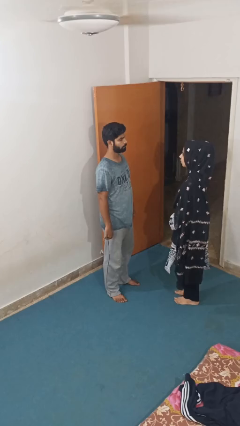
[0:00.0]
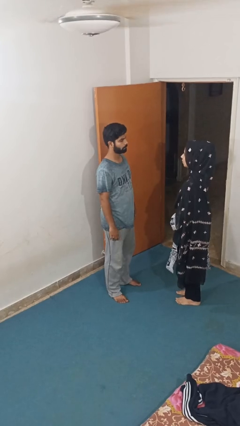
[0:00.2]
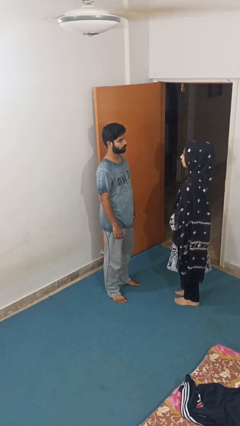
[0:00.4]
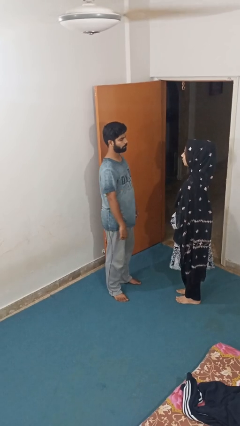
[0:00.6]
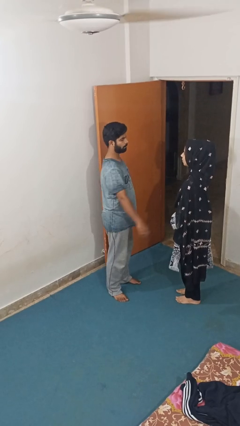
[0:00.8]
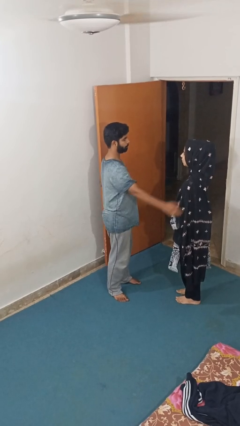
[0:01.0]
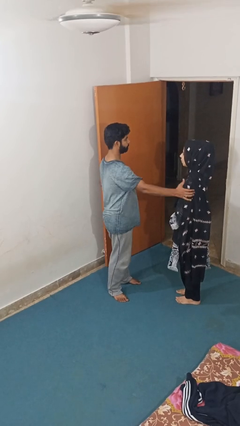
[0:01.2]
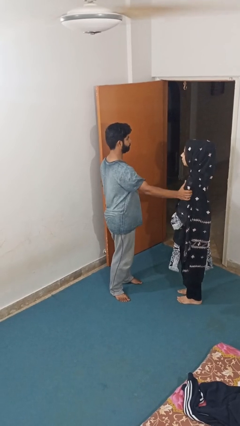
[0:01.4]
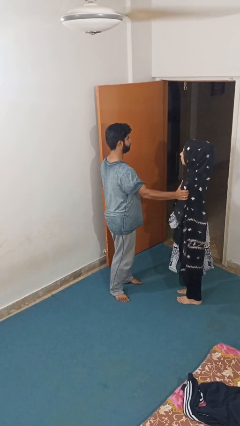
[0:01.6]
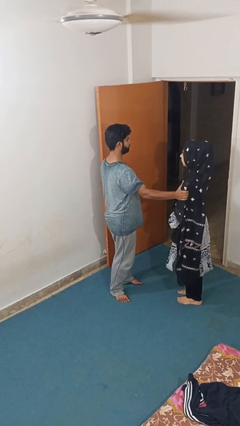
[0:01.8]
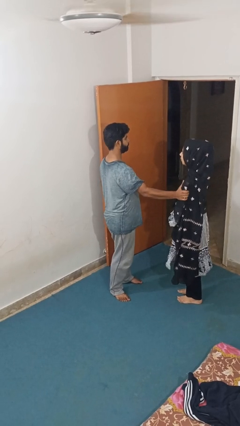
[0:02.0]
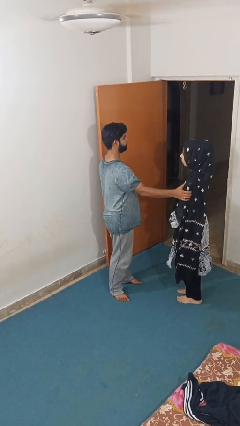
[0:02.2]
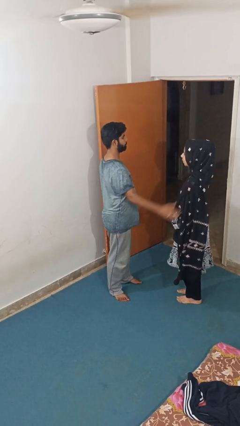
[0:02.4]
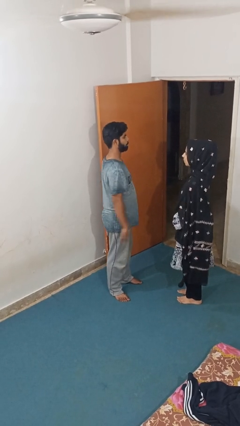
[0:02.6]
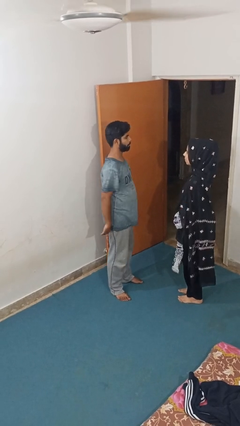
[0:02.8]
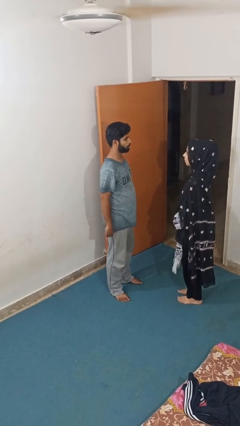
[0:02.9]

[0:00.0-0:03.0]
person grabs person by bicep

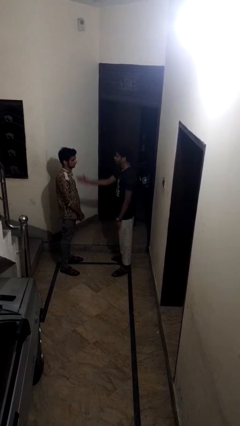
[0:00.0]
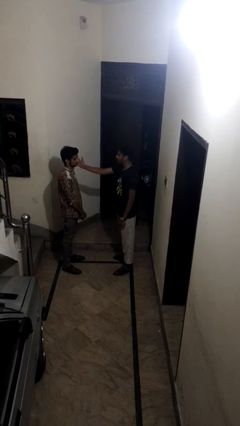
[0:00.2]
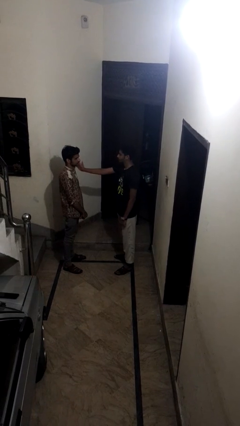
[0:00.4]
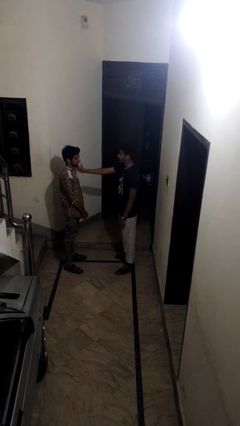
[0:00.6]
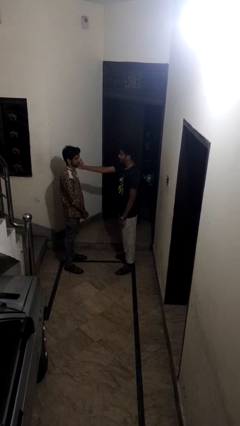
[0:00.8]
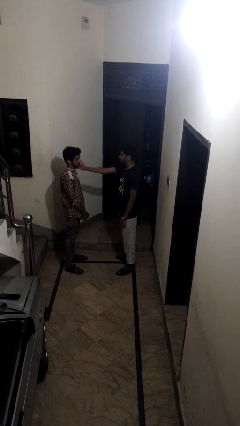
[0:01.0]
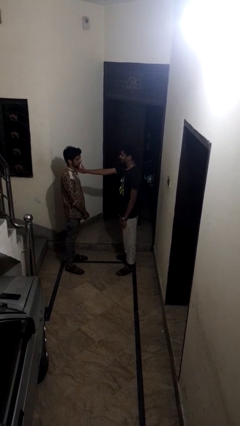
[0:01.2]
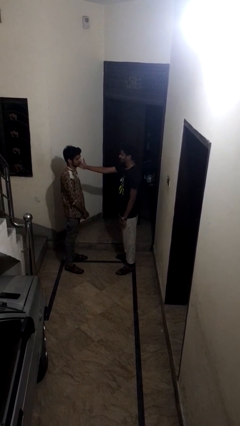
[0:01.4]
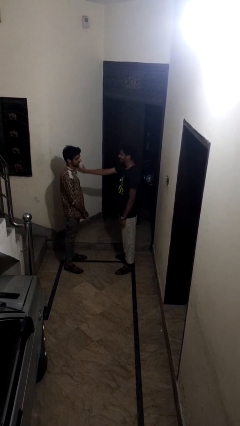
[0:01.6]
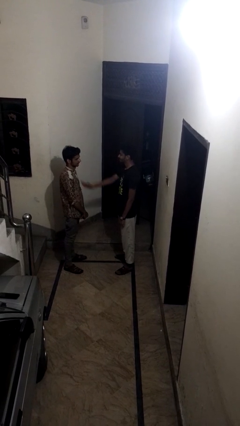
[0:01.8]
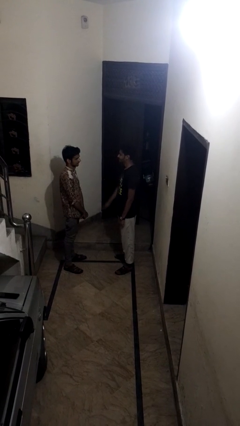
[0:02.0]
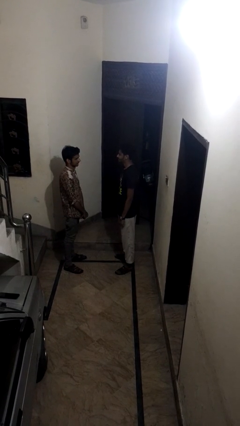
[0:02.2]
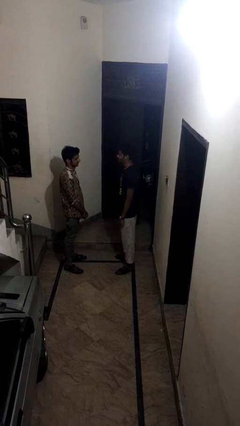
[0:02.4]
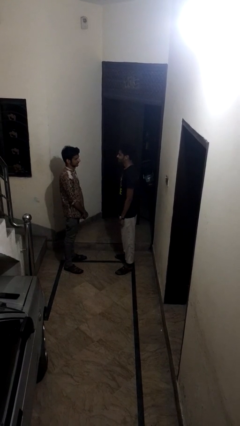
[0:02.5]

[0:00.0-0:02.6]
person touches face of person

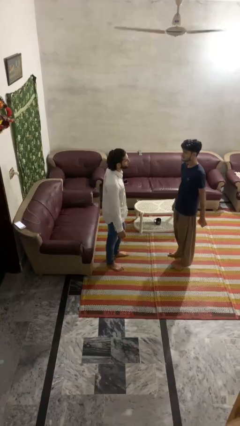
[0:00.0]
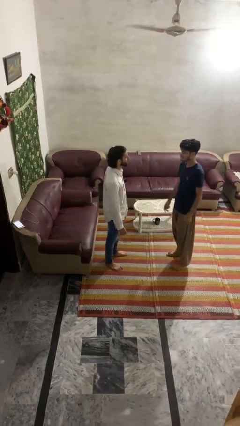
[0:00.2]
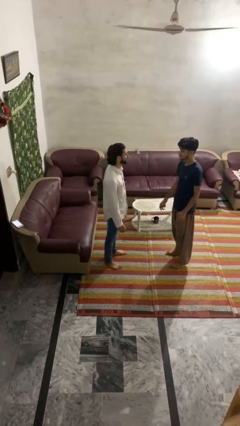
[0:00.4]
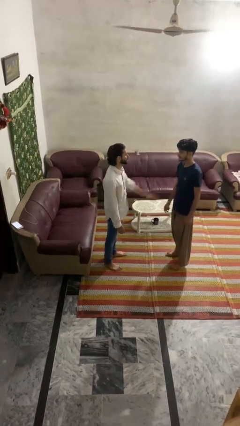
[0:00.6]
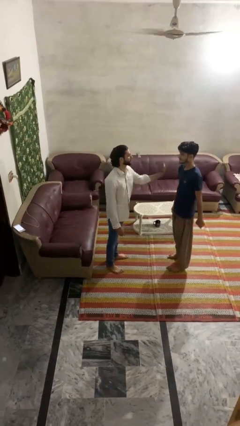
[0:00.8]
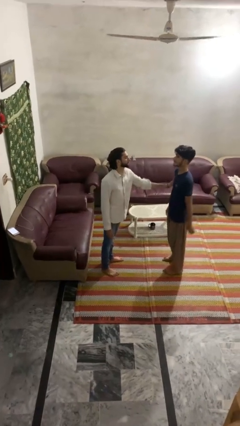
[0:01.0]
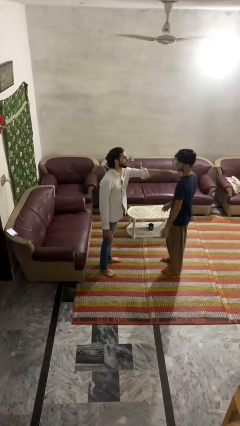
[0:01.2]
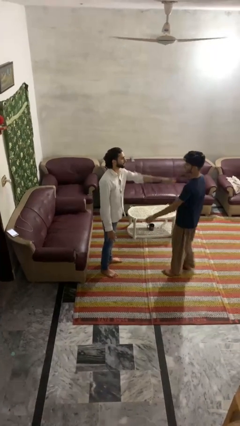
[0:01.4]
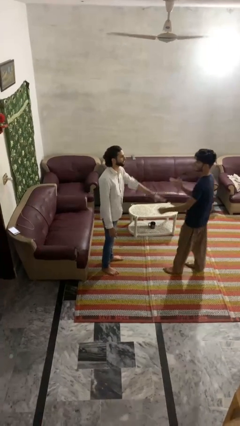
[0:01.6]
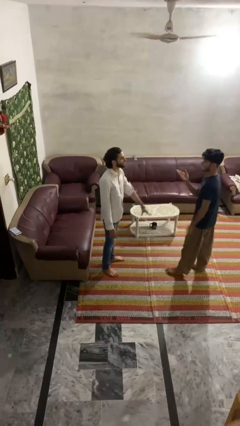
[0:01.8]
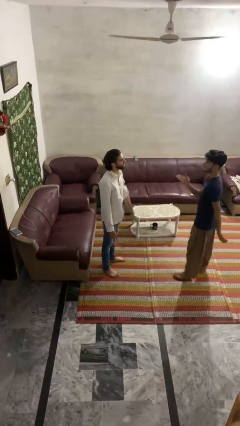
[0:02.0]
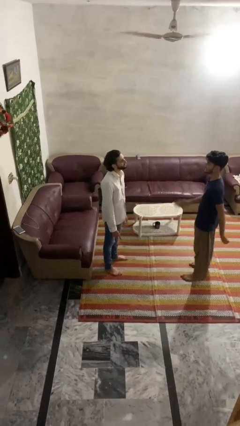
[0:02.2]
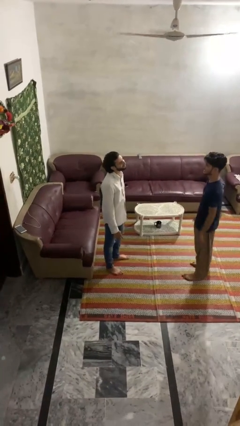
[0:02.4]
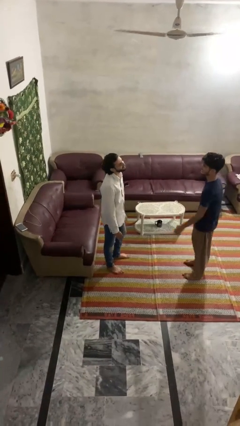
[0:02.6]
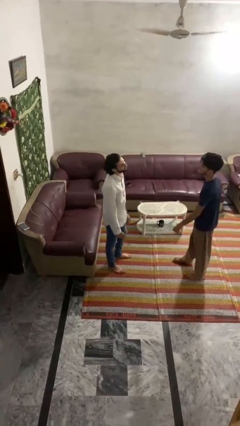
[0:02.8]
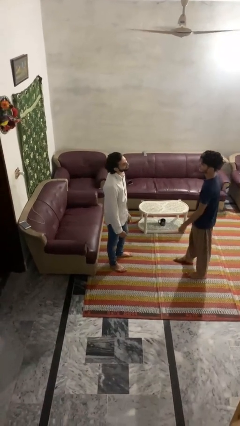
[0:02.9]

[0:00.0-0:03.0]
person shoves person

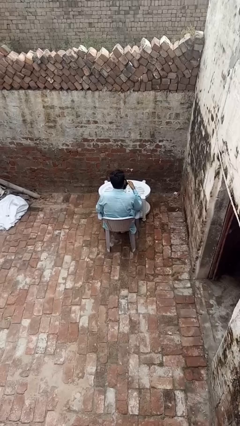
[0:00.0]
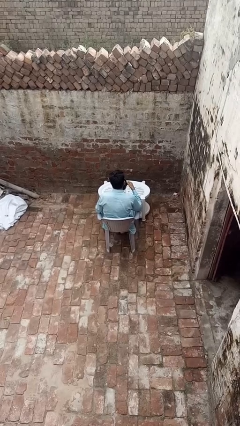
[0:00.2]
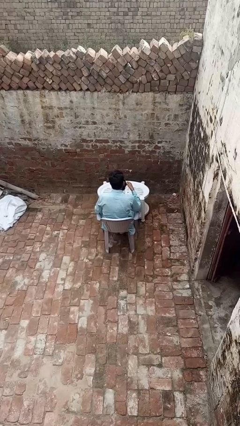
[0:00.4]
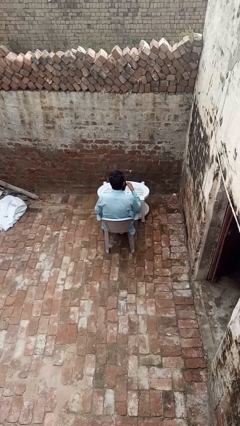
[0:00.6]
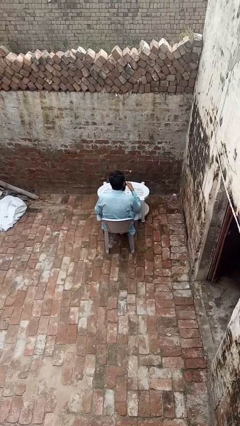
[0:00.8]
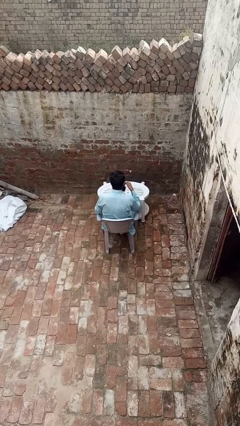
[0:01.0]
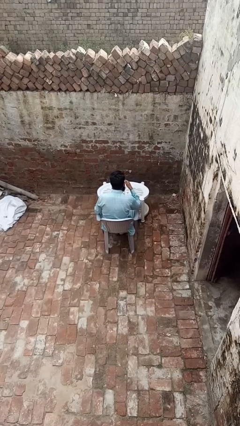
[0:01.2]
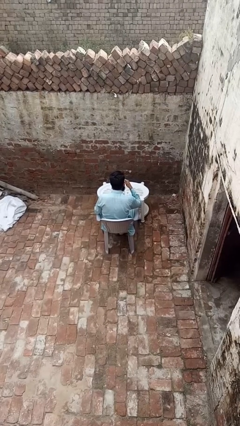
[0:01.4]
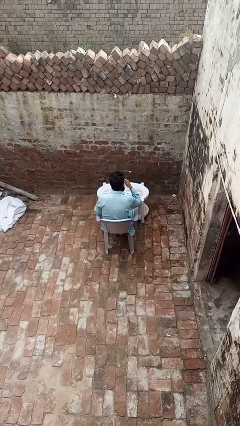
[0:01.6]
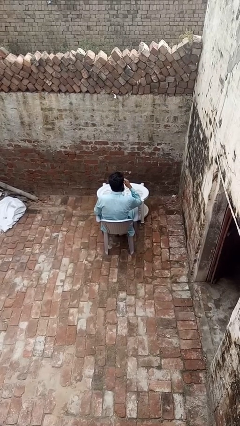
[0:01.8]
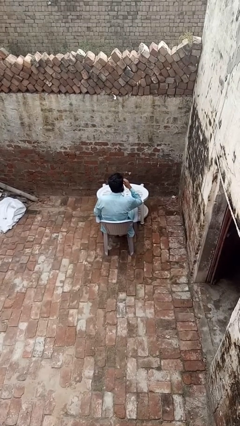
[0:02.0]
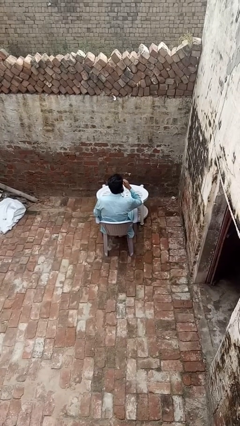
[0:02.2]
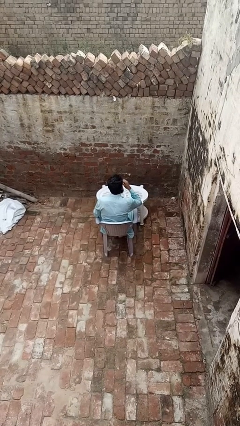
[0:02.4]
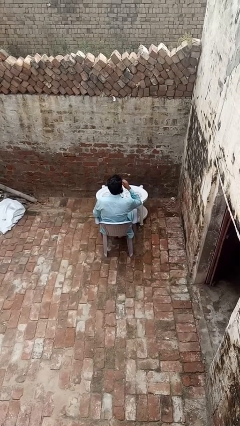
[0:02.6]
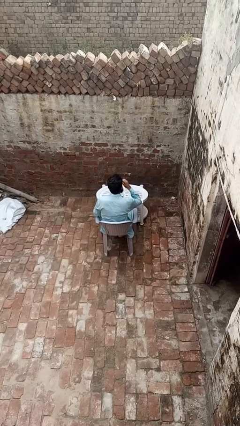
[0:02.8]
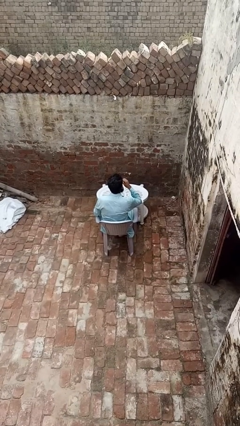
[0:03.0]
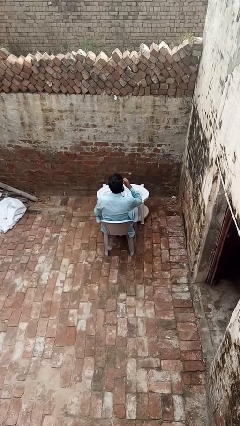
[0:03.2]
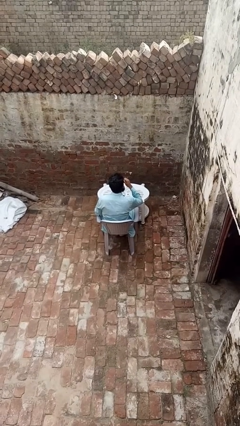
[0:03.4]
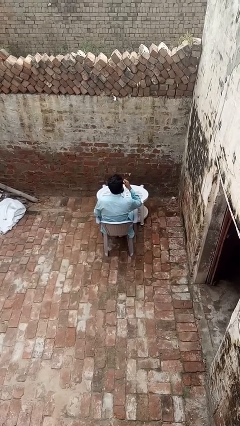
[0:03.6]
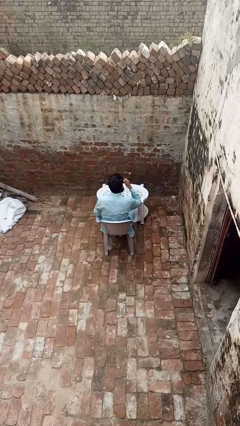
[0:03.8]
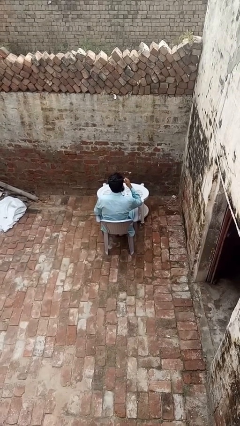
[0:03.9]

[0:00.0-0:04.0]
person drinks from mug

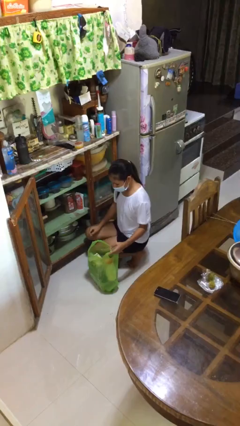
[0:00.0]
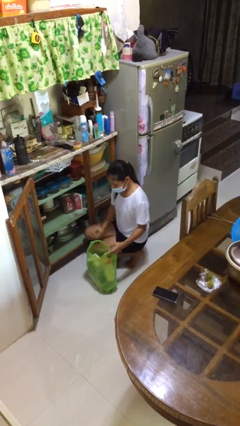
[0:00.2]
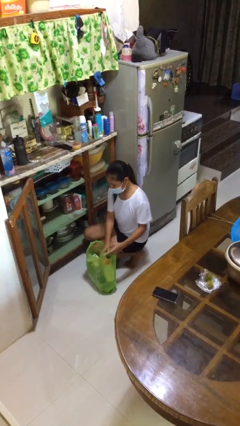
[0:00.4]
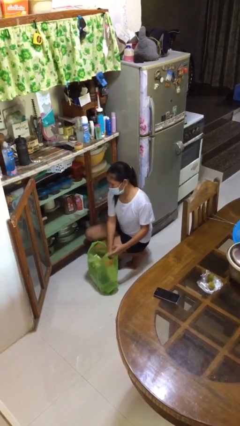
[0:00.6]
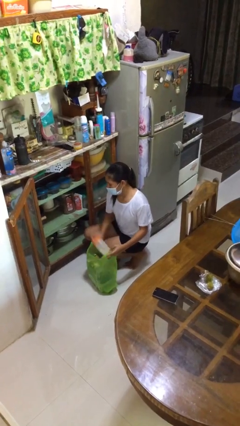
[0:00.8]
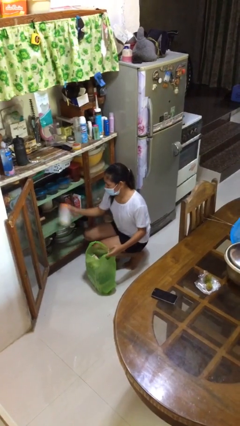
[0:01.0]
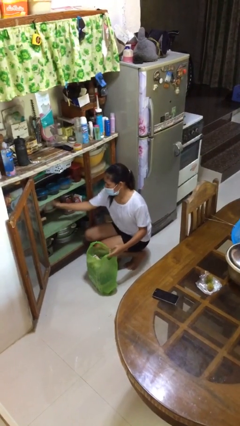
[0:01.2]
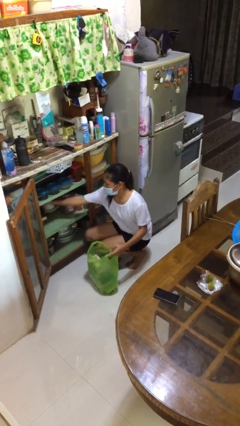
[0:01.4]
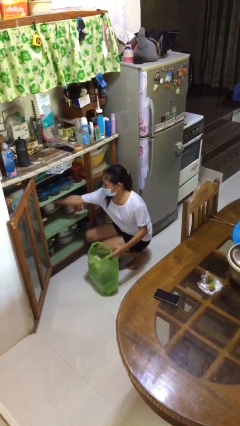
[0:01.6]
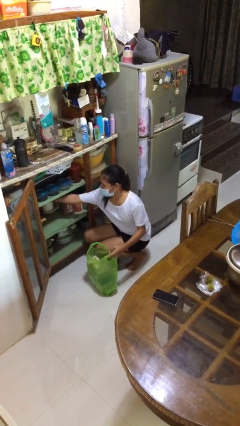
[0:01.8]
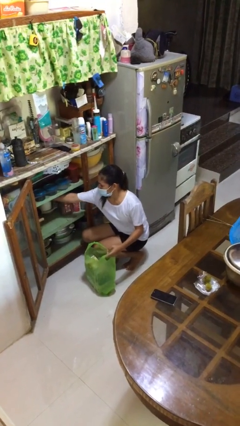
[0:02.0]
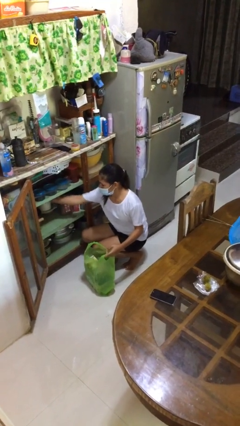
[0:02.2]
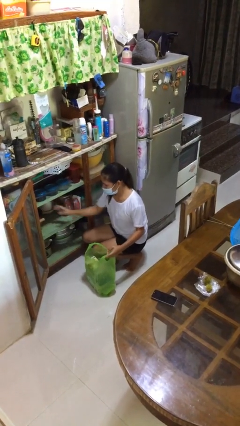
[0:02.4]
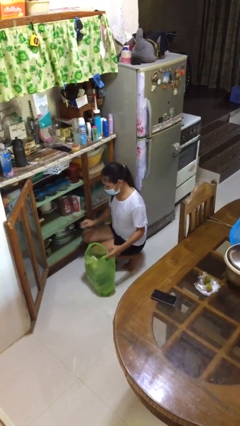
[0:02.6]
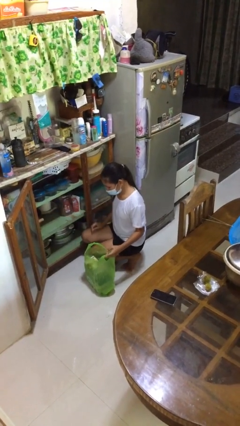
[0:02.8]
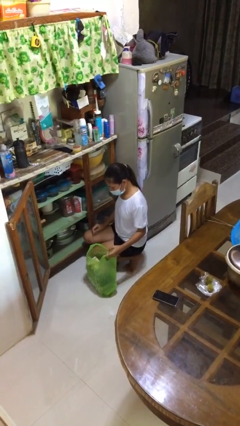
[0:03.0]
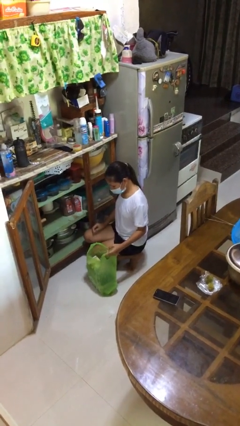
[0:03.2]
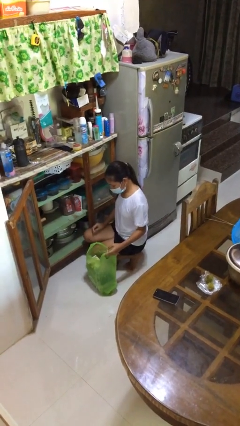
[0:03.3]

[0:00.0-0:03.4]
person loads groceries into cabinet

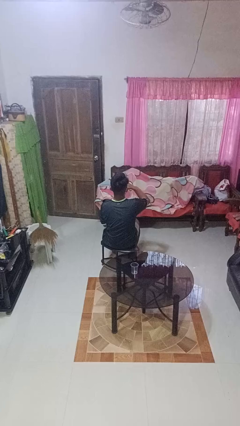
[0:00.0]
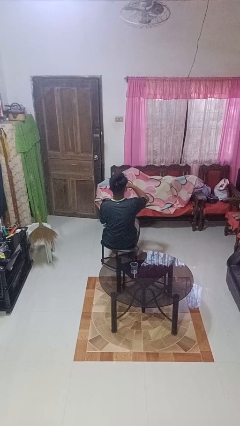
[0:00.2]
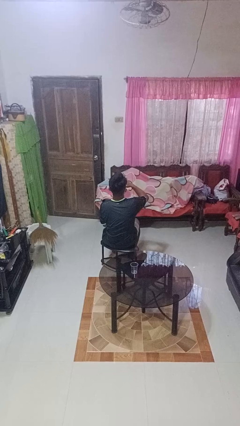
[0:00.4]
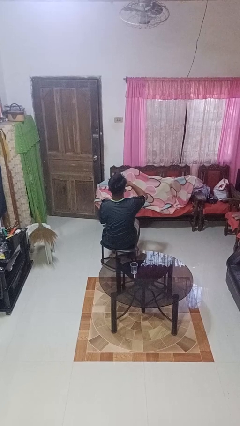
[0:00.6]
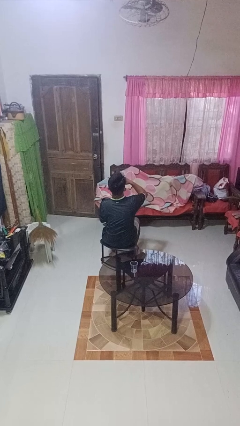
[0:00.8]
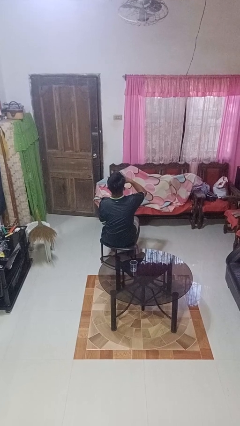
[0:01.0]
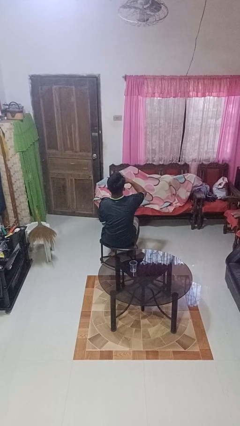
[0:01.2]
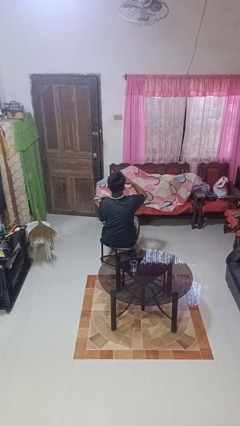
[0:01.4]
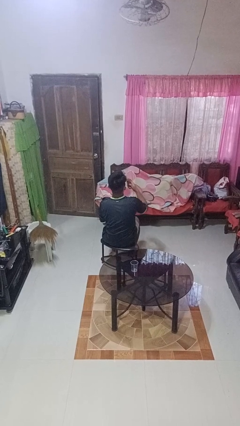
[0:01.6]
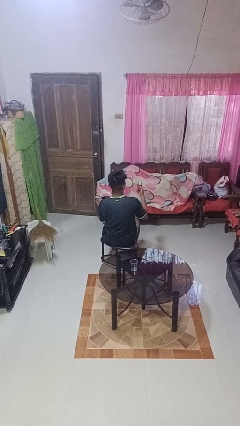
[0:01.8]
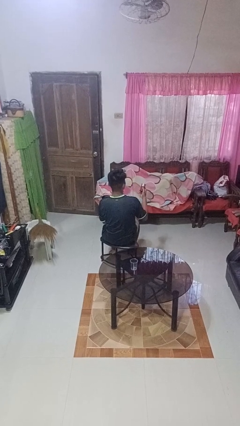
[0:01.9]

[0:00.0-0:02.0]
person drinks from beverage can
